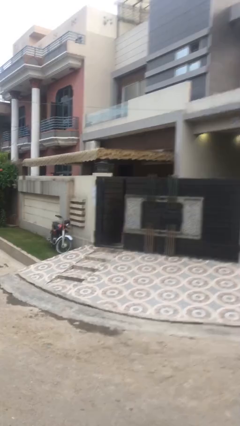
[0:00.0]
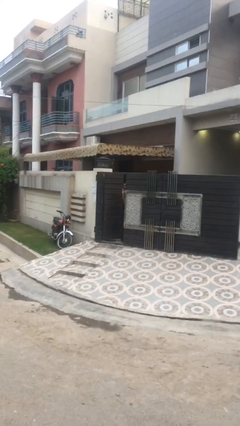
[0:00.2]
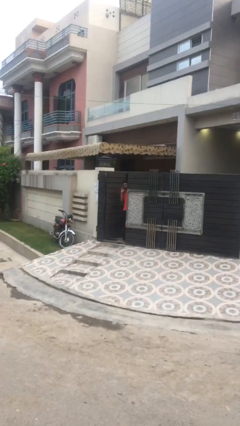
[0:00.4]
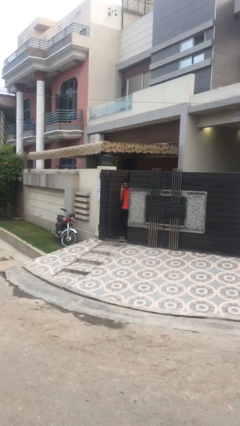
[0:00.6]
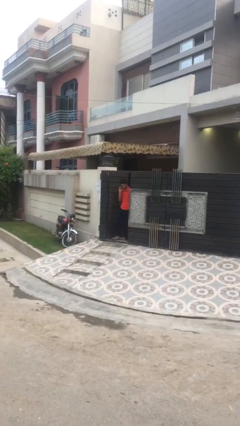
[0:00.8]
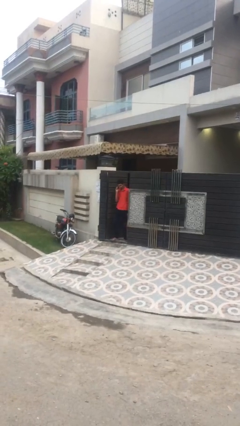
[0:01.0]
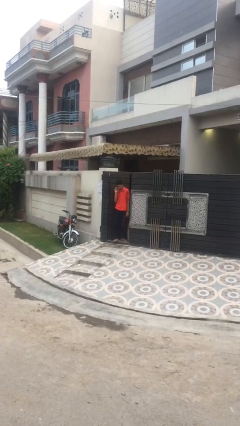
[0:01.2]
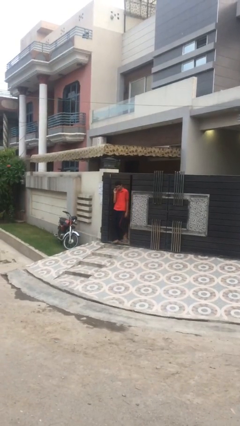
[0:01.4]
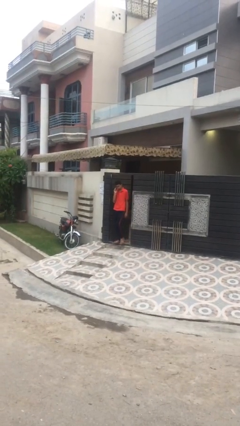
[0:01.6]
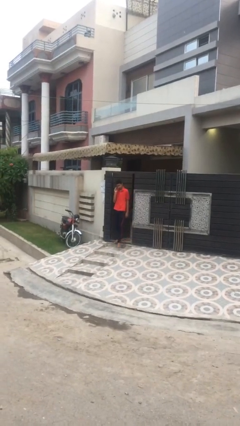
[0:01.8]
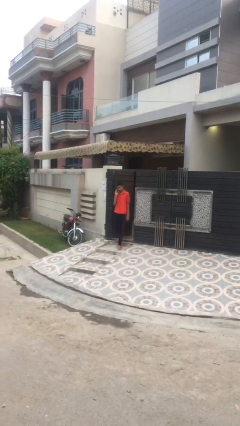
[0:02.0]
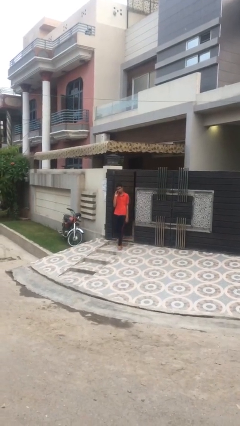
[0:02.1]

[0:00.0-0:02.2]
person enters scene through structure

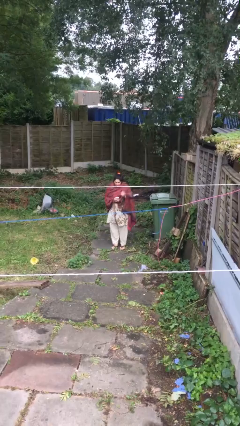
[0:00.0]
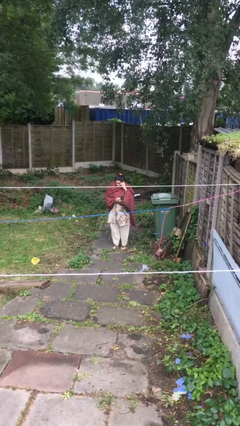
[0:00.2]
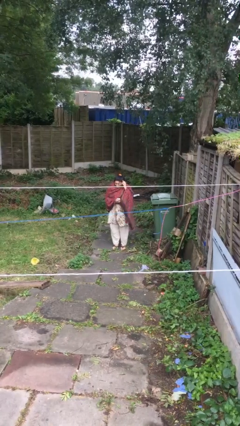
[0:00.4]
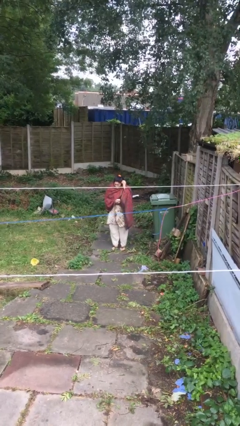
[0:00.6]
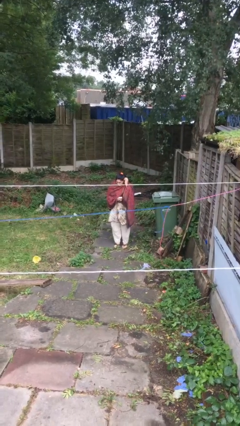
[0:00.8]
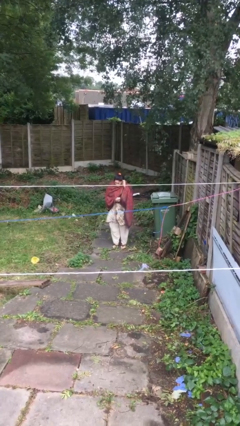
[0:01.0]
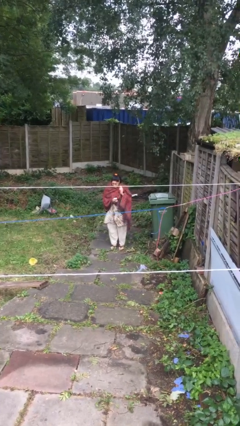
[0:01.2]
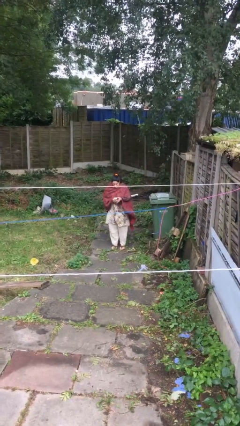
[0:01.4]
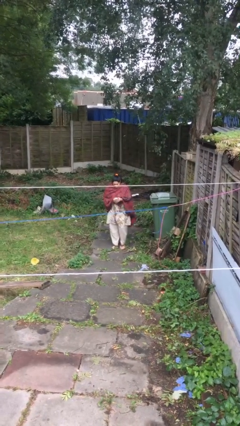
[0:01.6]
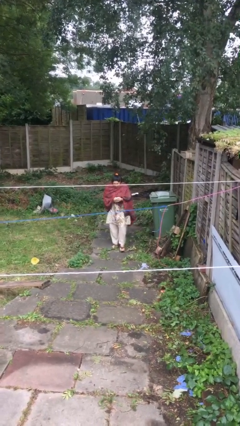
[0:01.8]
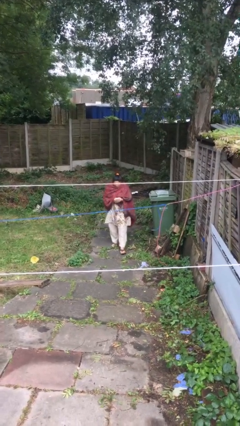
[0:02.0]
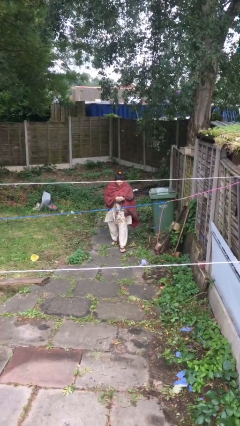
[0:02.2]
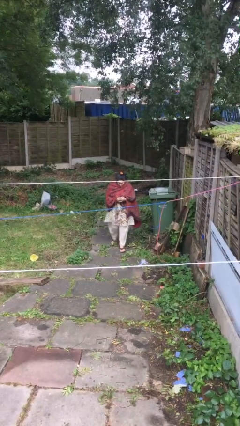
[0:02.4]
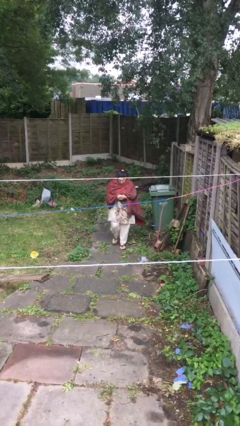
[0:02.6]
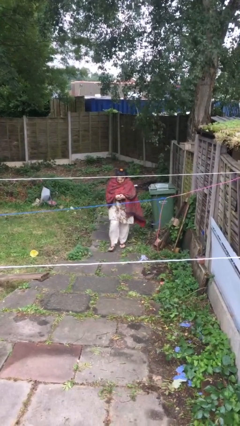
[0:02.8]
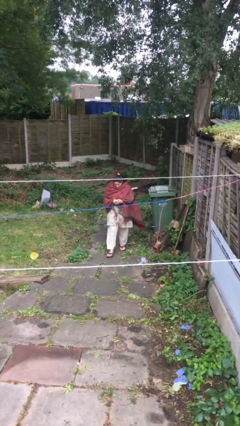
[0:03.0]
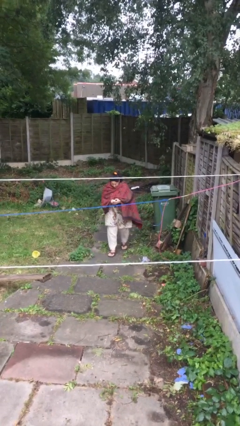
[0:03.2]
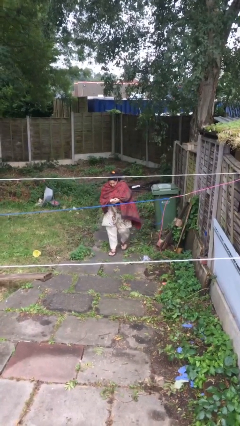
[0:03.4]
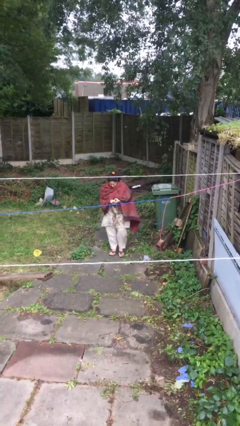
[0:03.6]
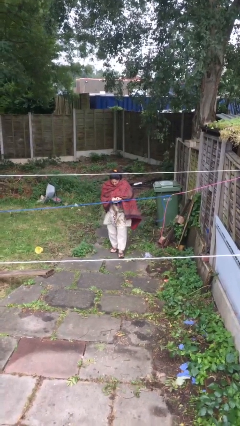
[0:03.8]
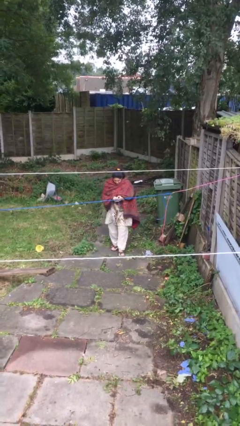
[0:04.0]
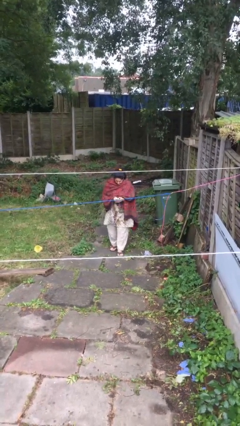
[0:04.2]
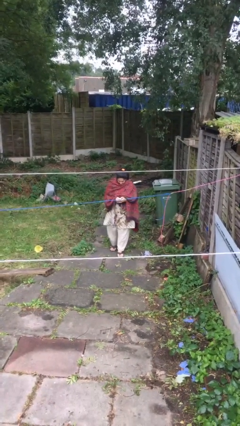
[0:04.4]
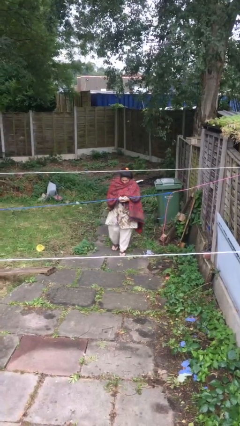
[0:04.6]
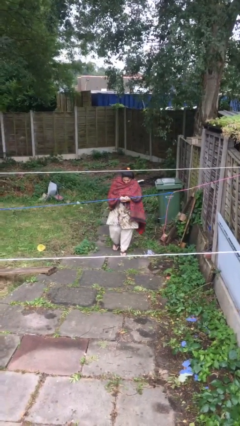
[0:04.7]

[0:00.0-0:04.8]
person texts on phone

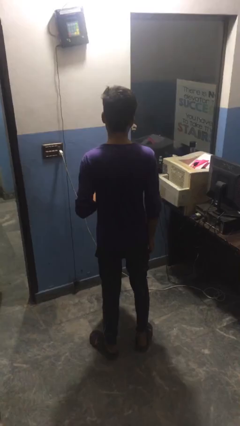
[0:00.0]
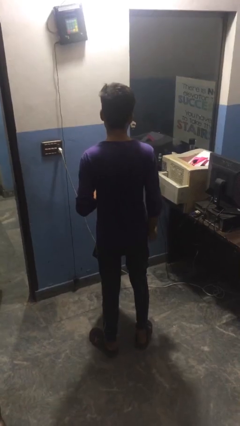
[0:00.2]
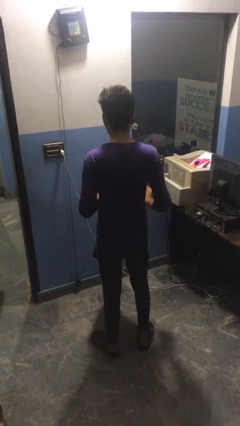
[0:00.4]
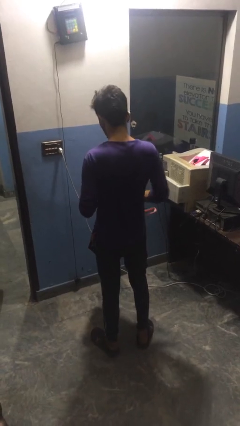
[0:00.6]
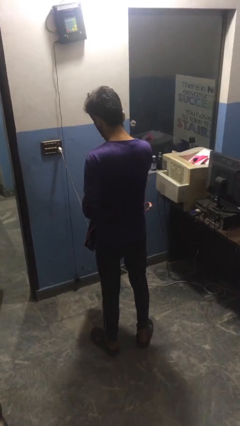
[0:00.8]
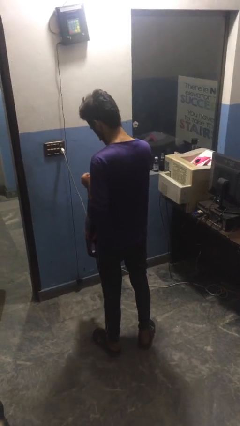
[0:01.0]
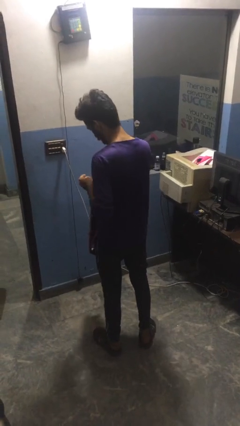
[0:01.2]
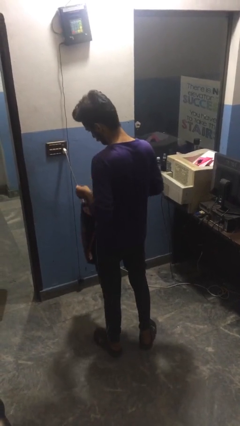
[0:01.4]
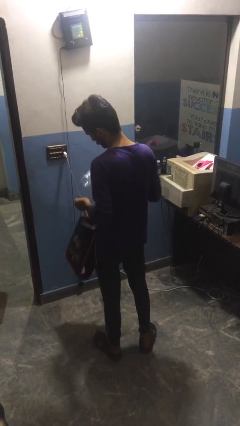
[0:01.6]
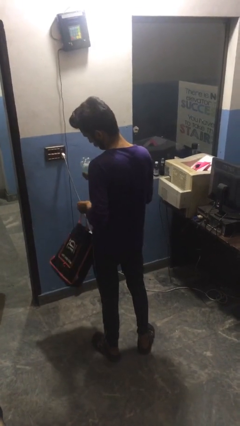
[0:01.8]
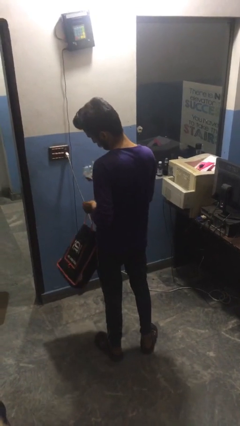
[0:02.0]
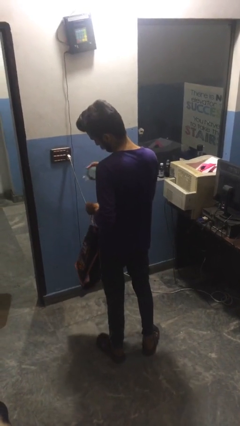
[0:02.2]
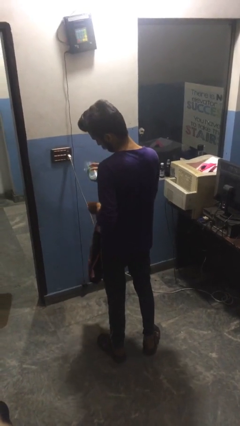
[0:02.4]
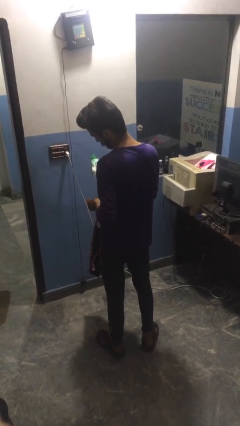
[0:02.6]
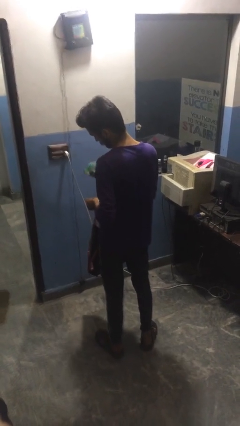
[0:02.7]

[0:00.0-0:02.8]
person takes object from bag

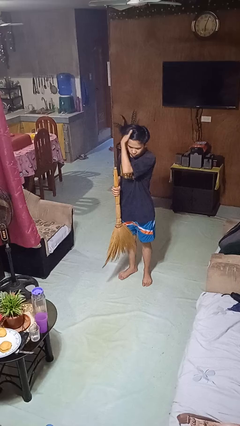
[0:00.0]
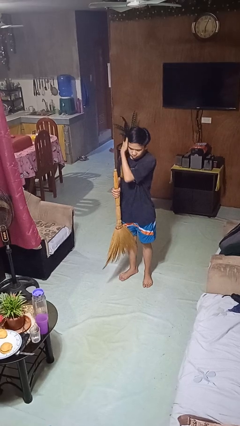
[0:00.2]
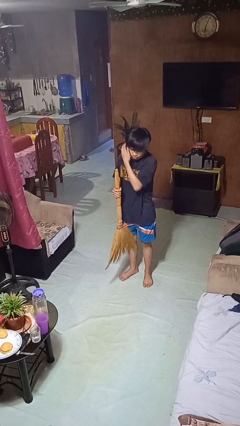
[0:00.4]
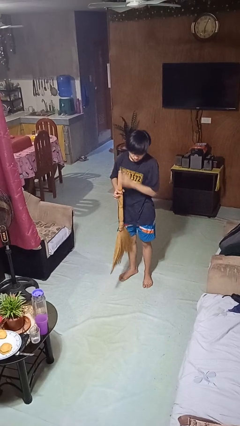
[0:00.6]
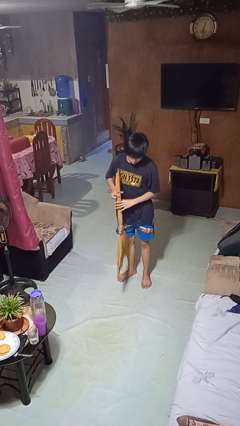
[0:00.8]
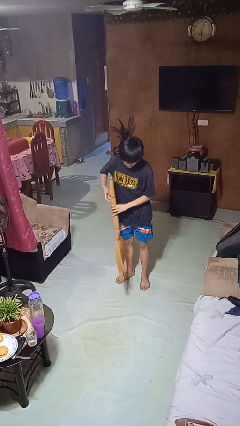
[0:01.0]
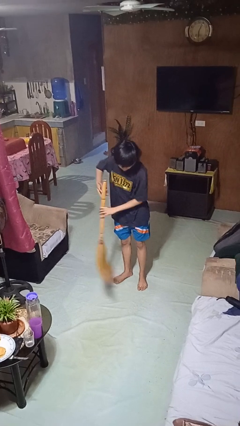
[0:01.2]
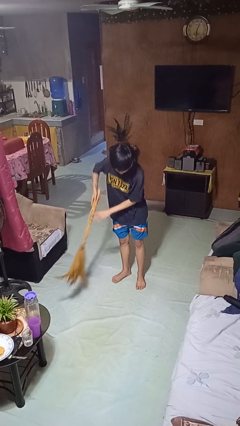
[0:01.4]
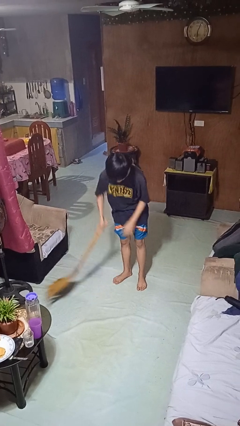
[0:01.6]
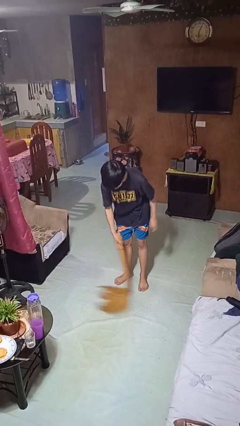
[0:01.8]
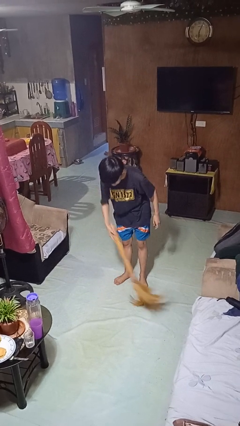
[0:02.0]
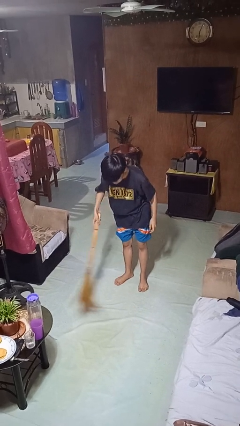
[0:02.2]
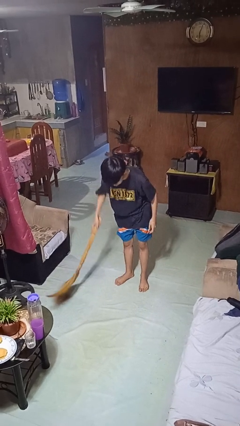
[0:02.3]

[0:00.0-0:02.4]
person sweeps floor

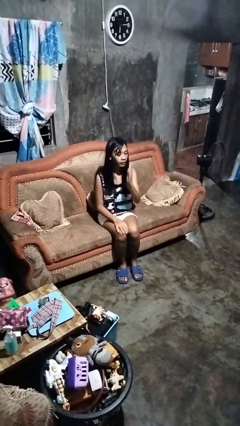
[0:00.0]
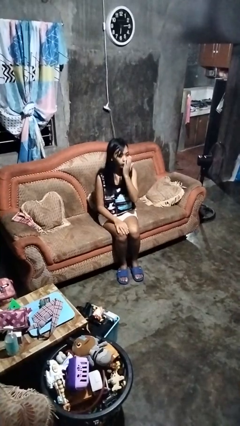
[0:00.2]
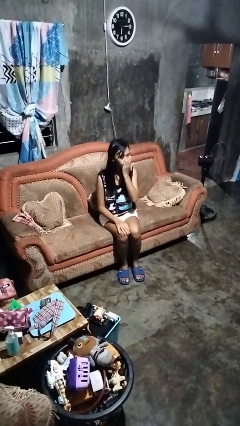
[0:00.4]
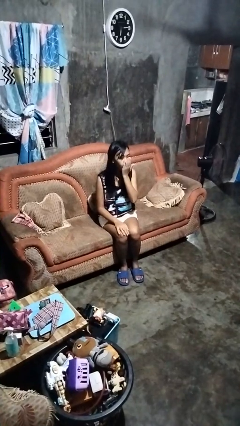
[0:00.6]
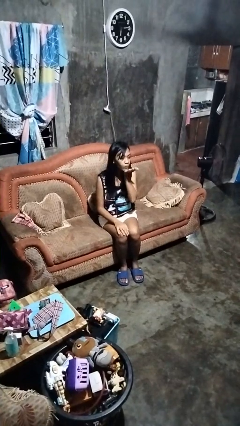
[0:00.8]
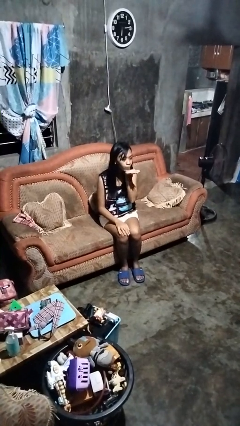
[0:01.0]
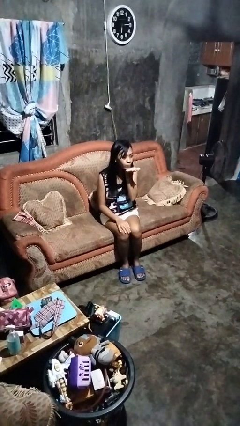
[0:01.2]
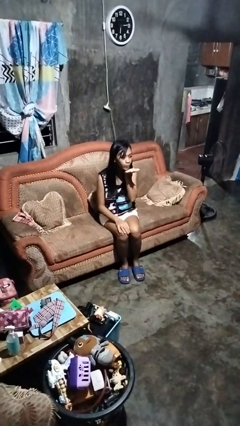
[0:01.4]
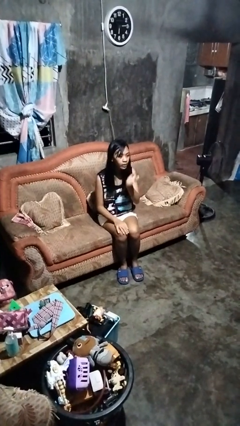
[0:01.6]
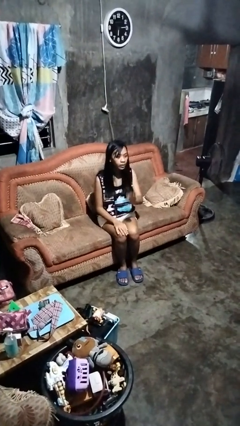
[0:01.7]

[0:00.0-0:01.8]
person gestures blow kiss

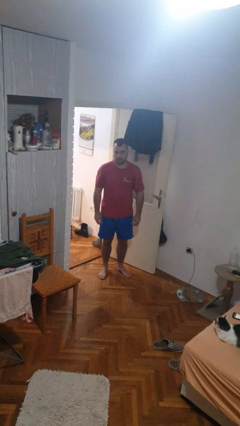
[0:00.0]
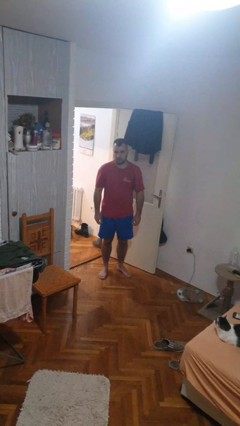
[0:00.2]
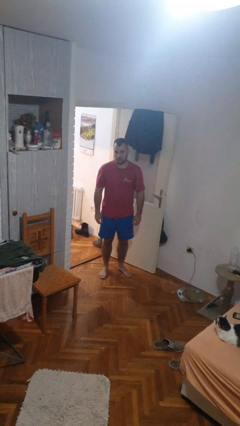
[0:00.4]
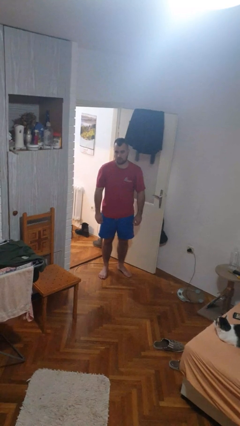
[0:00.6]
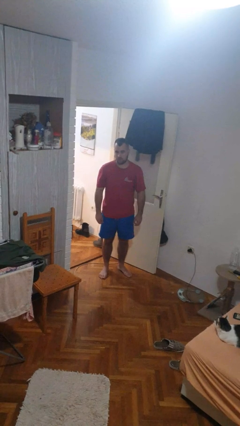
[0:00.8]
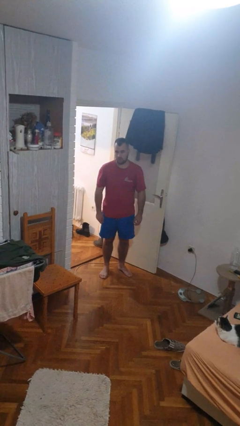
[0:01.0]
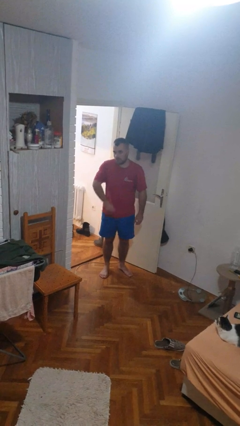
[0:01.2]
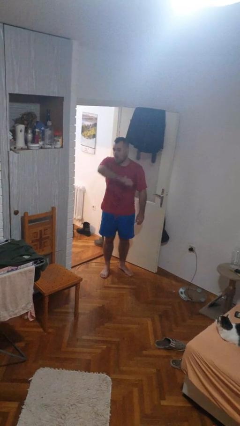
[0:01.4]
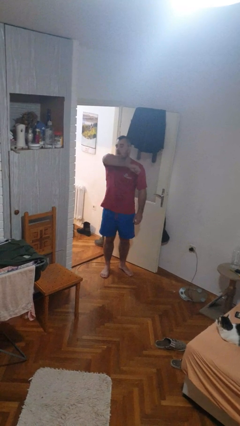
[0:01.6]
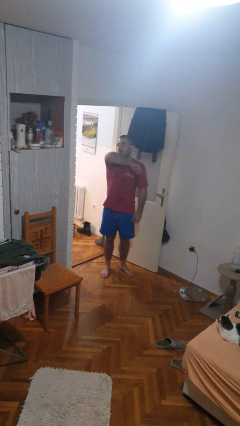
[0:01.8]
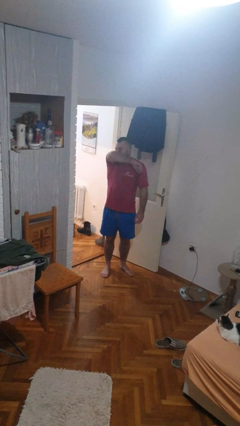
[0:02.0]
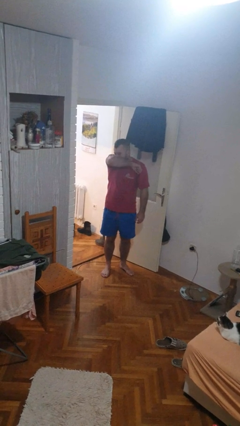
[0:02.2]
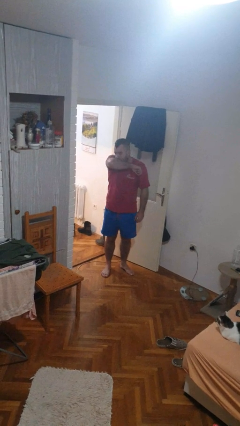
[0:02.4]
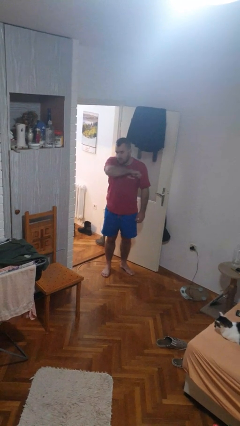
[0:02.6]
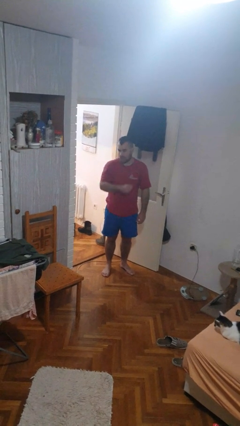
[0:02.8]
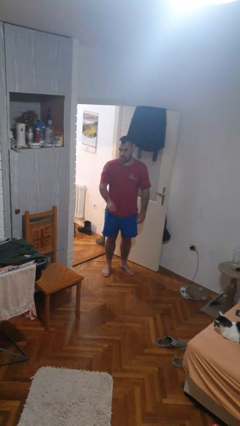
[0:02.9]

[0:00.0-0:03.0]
person sneezes into arm

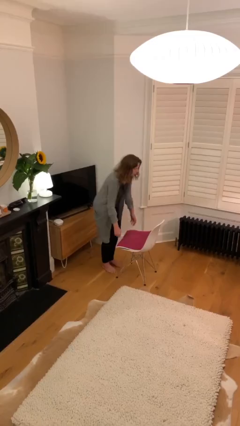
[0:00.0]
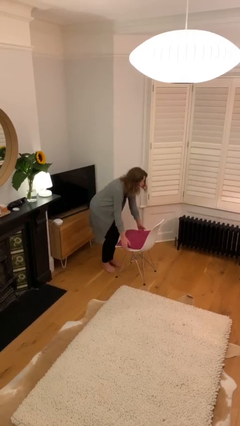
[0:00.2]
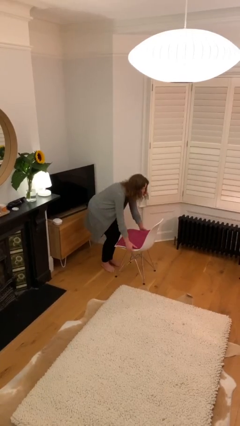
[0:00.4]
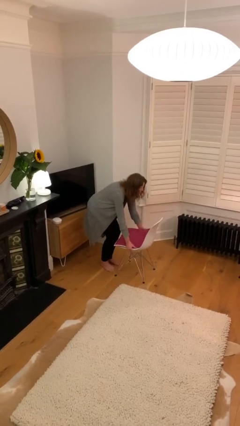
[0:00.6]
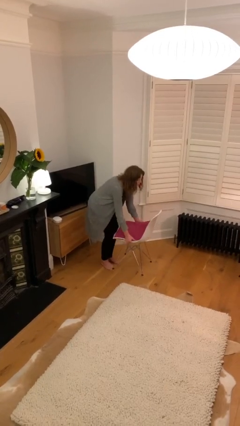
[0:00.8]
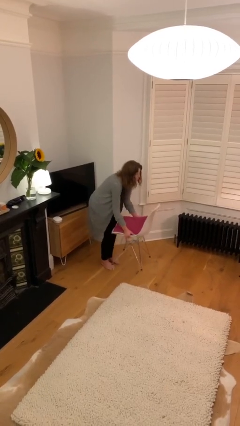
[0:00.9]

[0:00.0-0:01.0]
person picks up object from floor
